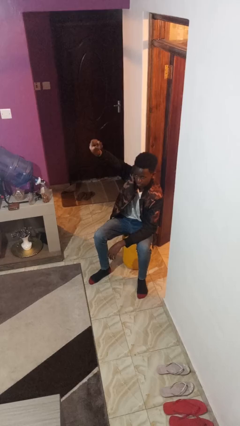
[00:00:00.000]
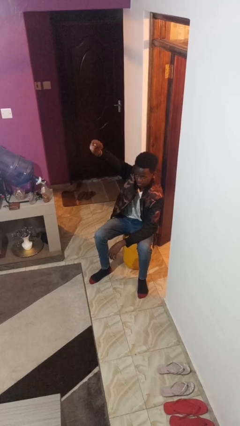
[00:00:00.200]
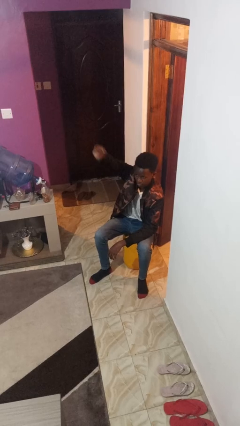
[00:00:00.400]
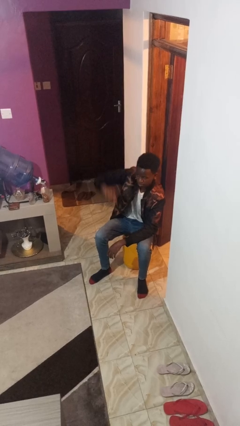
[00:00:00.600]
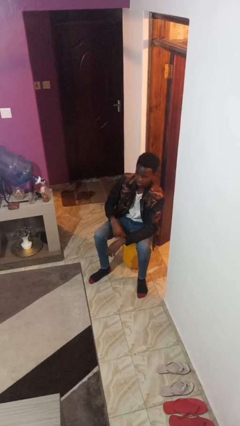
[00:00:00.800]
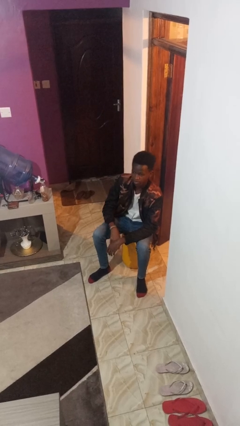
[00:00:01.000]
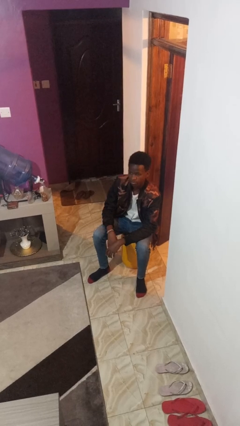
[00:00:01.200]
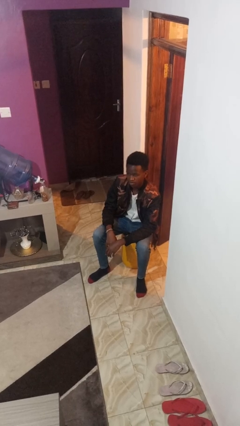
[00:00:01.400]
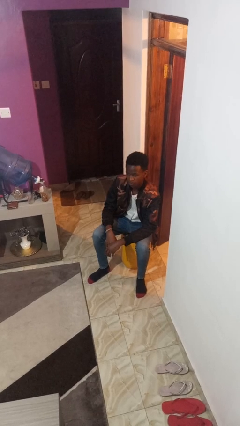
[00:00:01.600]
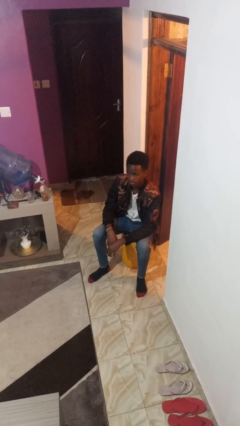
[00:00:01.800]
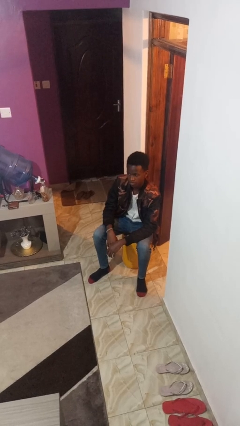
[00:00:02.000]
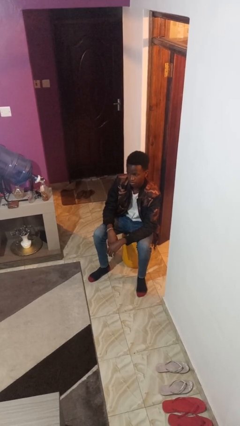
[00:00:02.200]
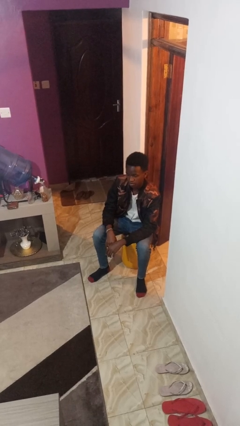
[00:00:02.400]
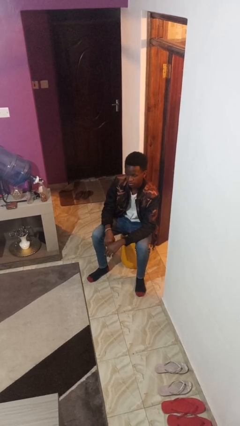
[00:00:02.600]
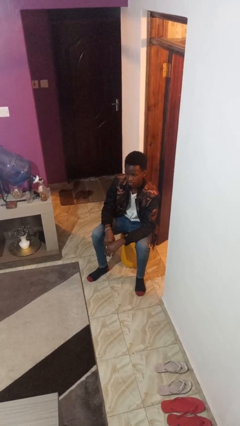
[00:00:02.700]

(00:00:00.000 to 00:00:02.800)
person gestures lower hand

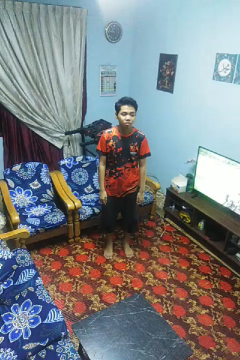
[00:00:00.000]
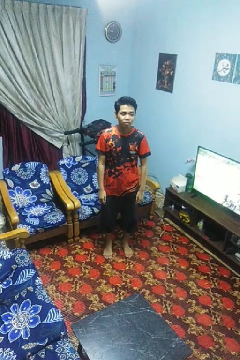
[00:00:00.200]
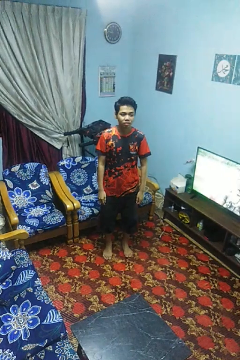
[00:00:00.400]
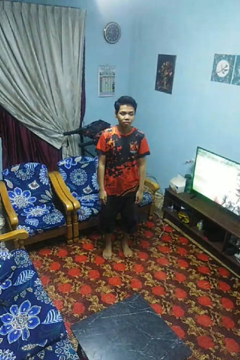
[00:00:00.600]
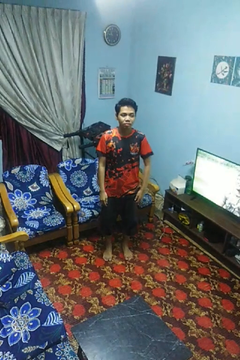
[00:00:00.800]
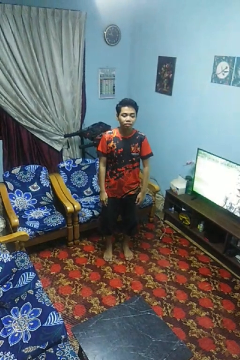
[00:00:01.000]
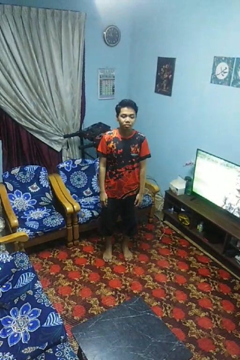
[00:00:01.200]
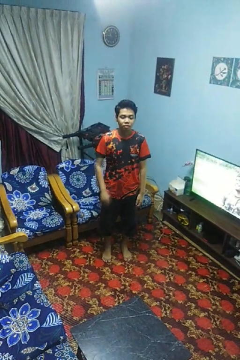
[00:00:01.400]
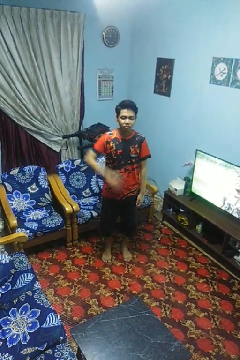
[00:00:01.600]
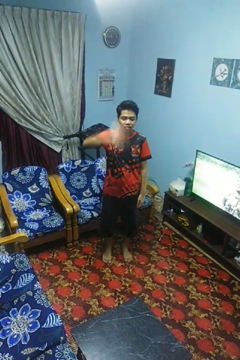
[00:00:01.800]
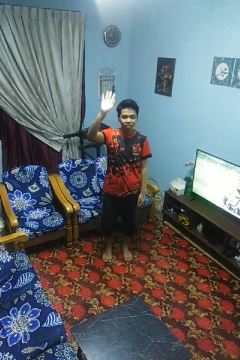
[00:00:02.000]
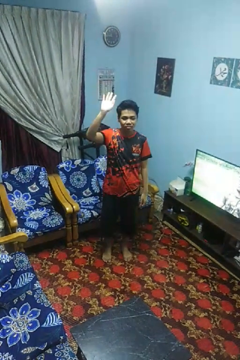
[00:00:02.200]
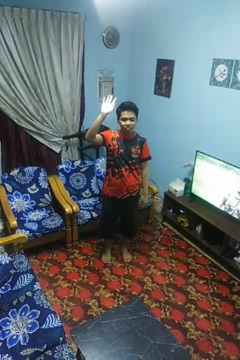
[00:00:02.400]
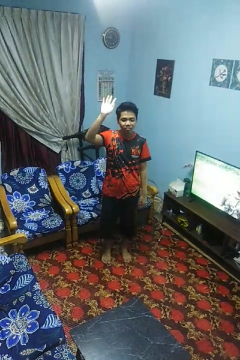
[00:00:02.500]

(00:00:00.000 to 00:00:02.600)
person gestures swipe up

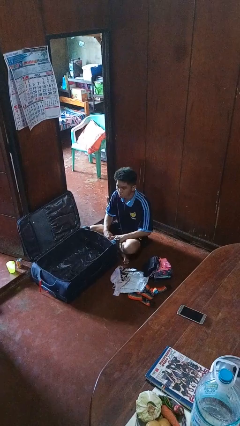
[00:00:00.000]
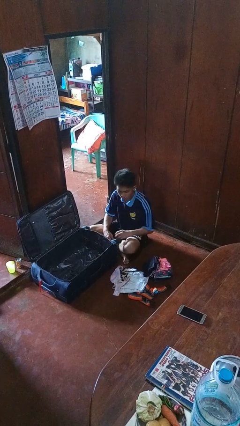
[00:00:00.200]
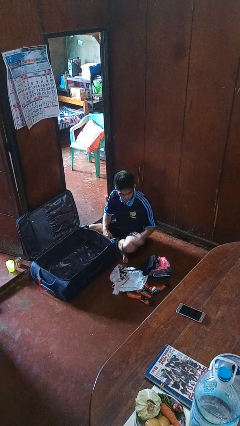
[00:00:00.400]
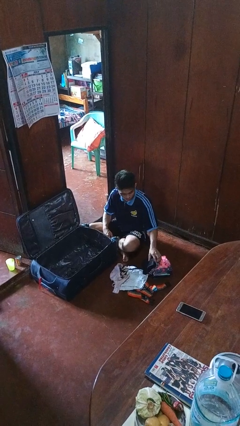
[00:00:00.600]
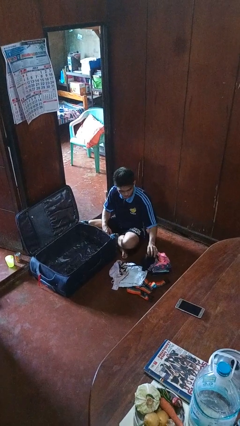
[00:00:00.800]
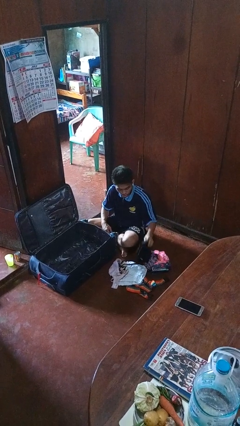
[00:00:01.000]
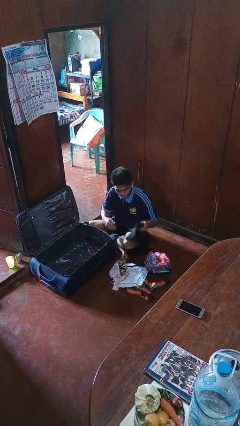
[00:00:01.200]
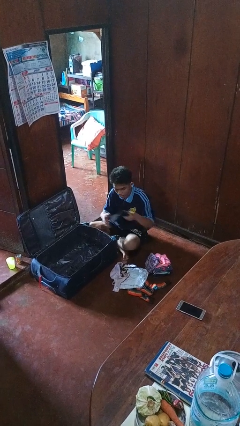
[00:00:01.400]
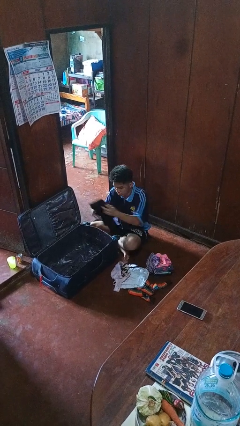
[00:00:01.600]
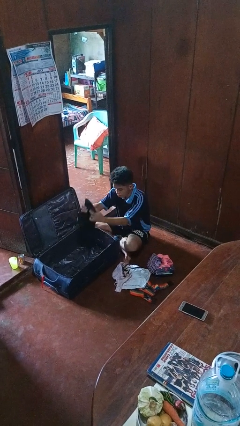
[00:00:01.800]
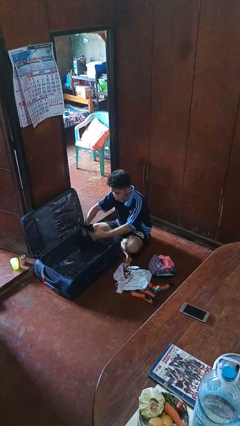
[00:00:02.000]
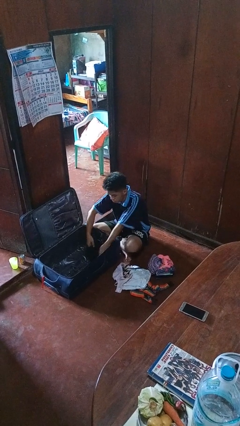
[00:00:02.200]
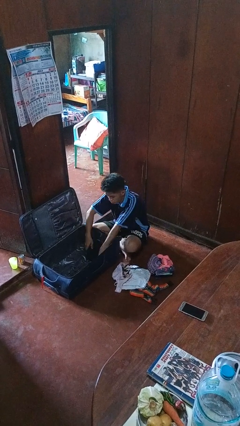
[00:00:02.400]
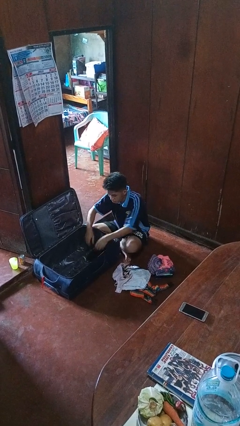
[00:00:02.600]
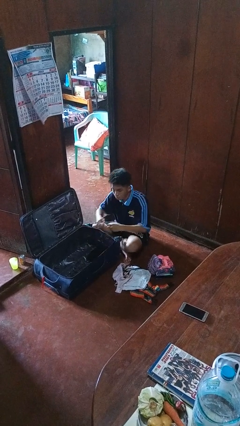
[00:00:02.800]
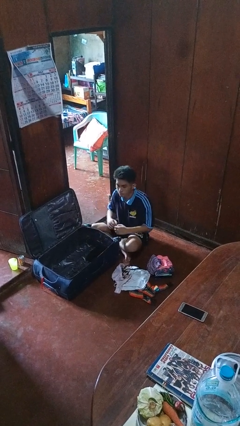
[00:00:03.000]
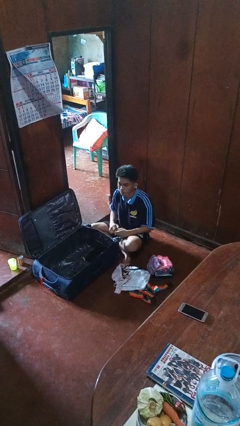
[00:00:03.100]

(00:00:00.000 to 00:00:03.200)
person loads clothes into suitcase

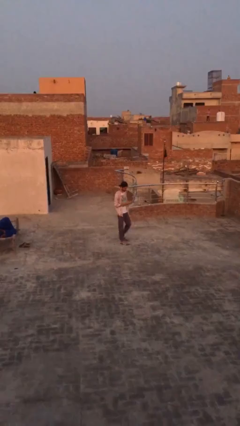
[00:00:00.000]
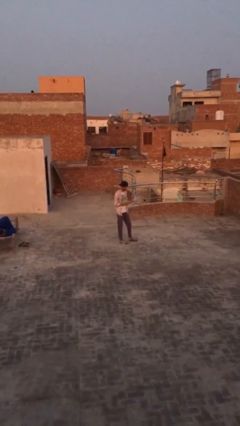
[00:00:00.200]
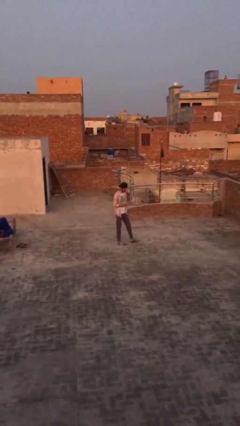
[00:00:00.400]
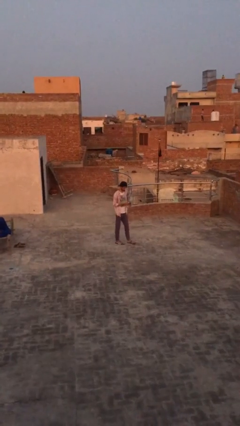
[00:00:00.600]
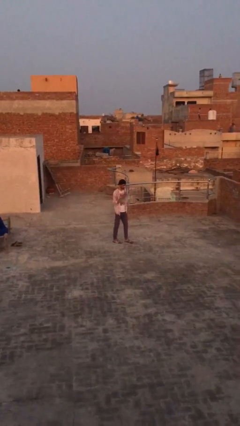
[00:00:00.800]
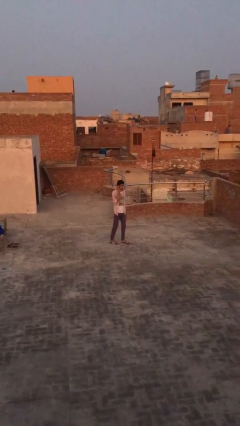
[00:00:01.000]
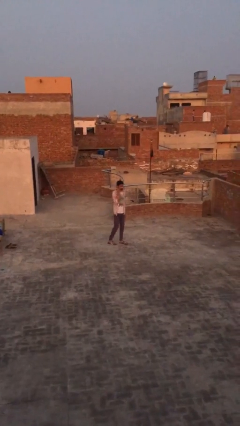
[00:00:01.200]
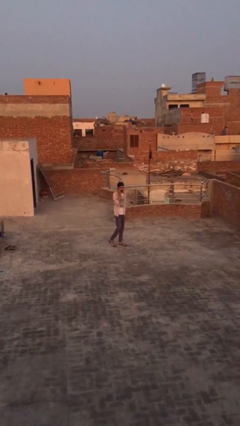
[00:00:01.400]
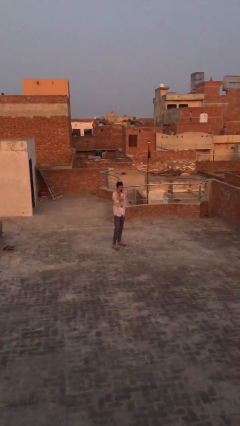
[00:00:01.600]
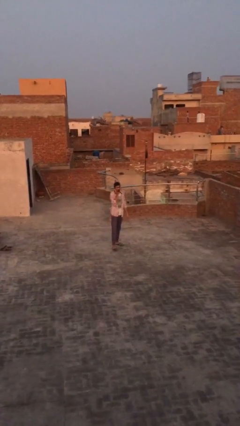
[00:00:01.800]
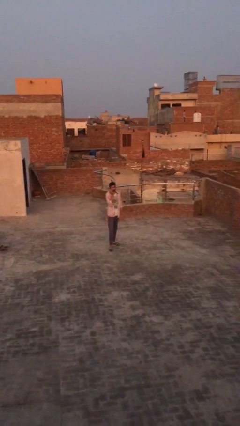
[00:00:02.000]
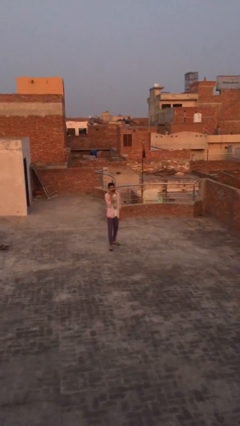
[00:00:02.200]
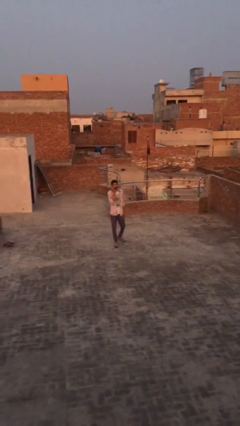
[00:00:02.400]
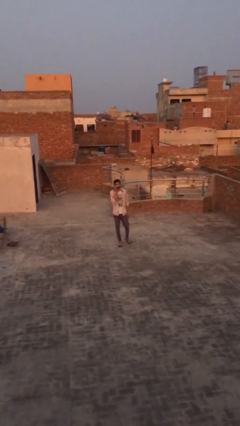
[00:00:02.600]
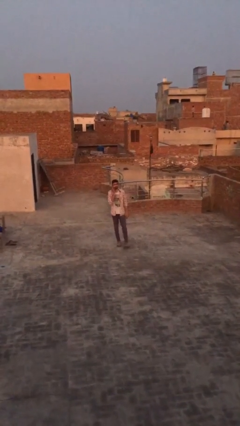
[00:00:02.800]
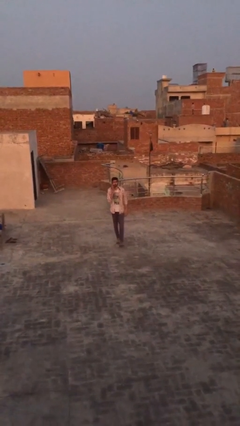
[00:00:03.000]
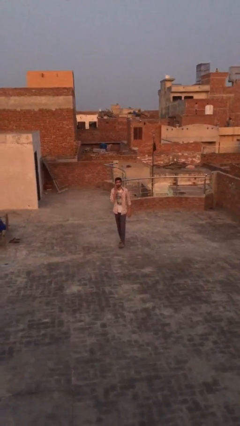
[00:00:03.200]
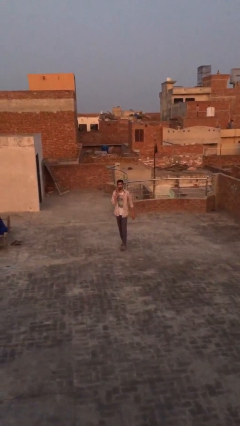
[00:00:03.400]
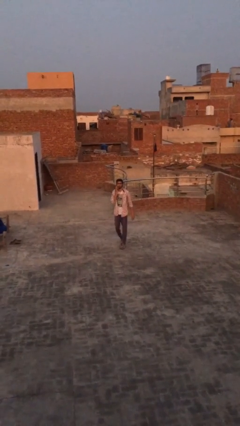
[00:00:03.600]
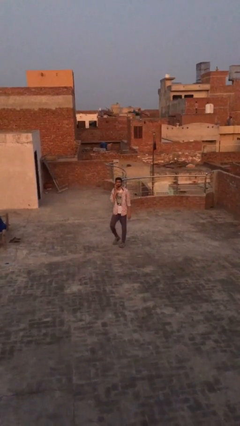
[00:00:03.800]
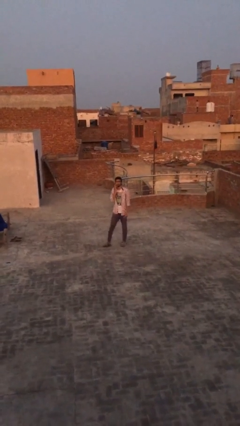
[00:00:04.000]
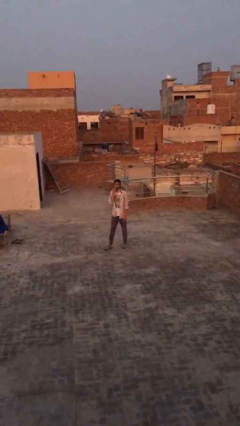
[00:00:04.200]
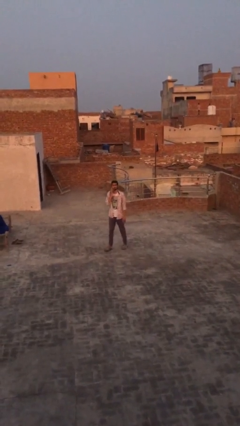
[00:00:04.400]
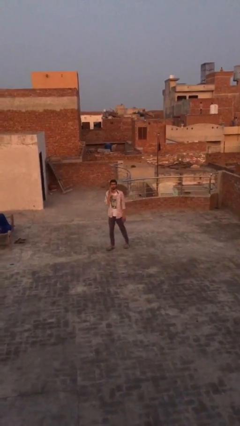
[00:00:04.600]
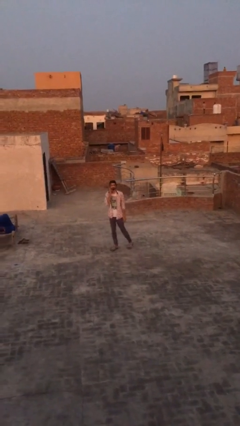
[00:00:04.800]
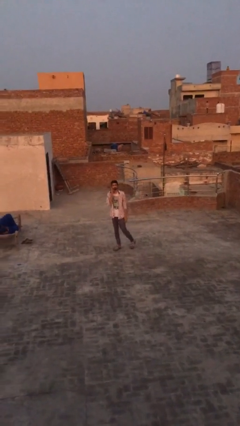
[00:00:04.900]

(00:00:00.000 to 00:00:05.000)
person talks on phone

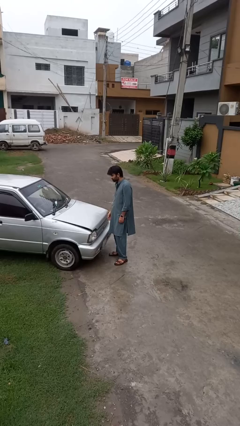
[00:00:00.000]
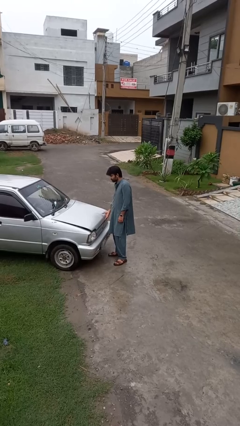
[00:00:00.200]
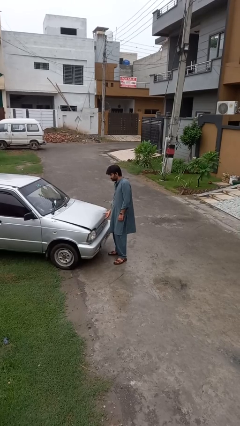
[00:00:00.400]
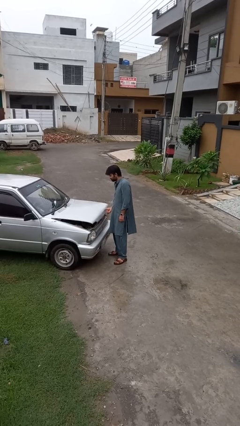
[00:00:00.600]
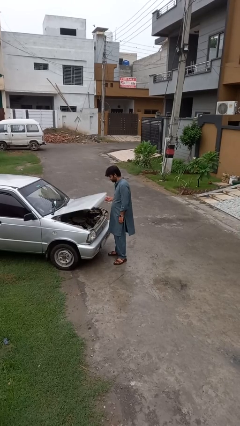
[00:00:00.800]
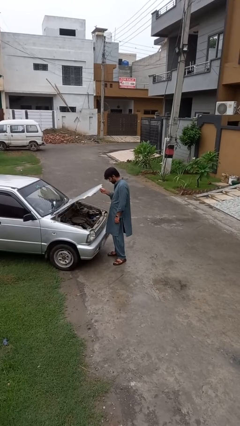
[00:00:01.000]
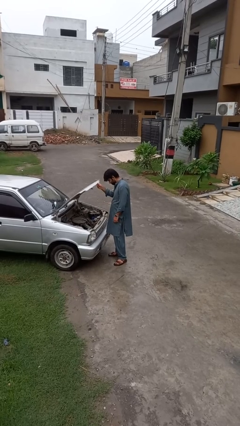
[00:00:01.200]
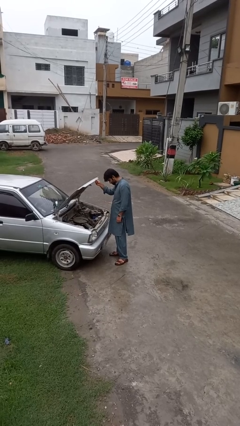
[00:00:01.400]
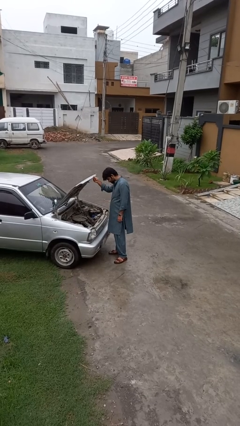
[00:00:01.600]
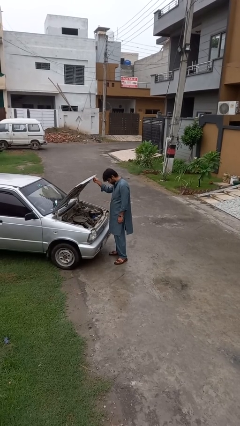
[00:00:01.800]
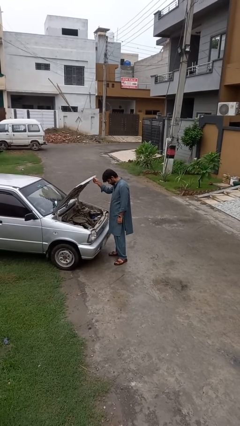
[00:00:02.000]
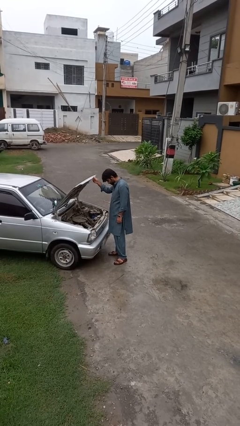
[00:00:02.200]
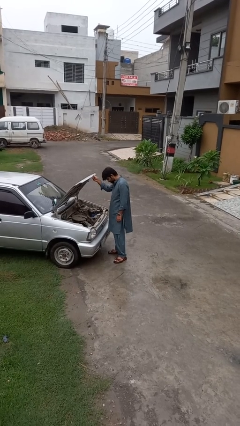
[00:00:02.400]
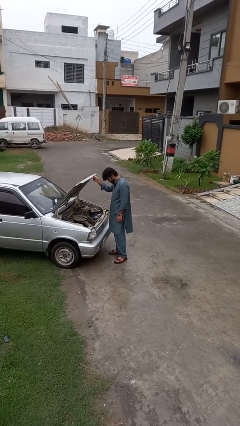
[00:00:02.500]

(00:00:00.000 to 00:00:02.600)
person opens car hood

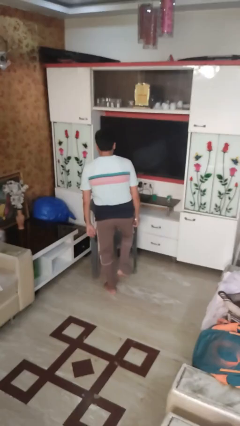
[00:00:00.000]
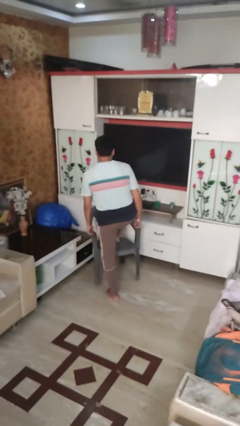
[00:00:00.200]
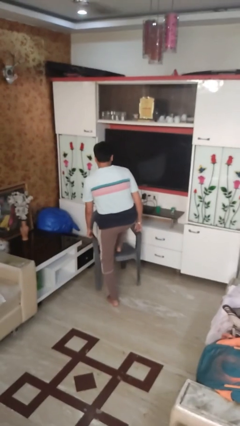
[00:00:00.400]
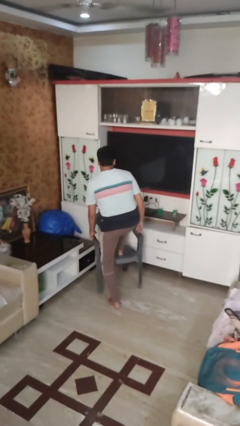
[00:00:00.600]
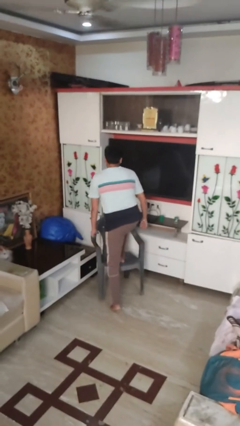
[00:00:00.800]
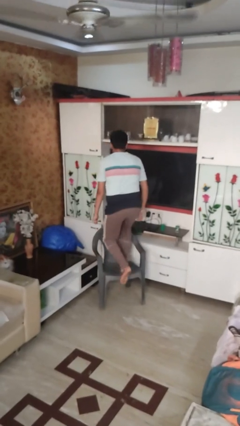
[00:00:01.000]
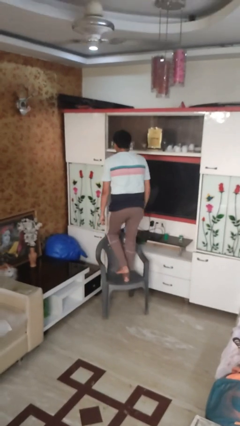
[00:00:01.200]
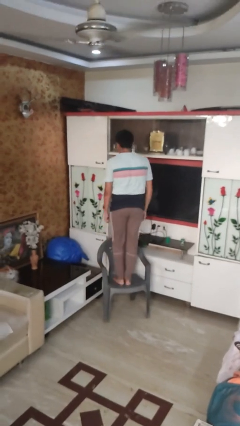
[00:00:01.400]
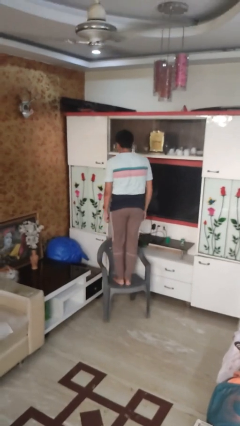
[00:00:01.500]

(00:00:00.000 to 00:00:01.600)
person climbs on chair
